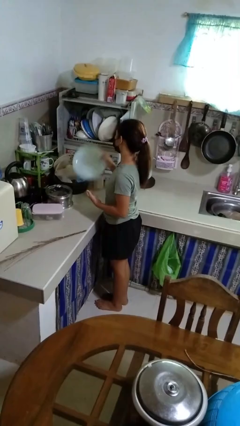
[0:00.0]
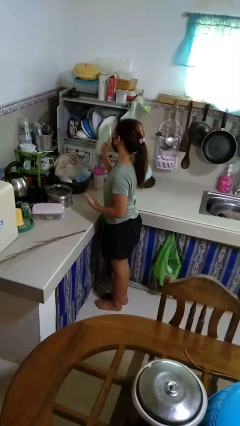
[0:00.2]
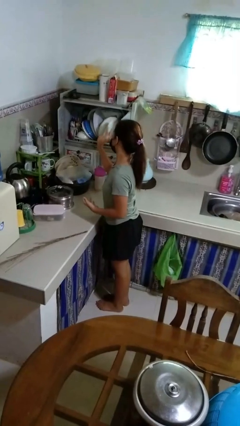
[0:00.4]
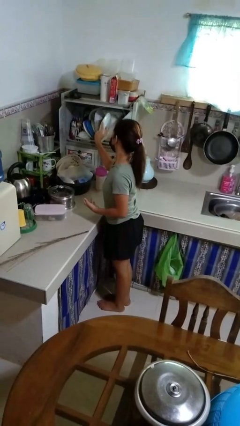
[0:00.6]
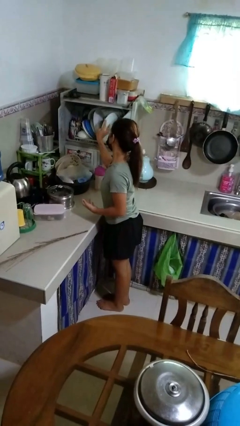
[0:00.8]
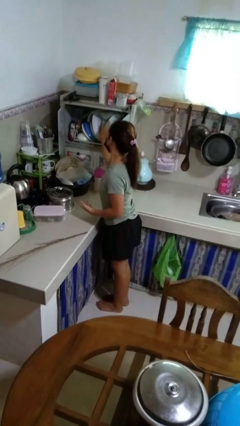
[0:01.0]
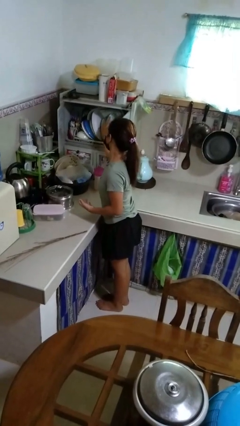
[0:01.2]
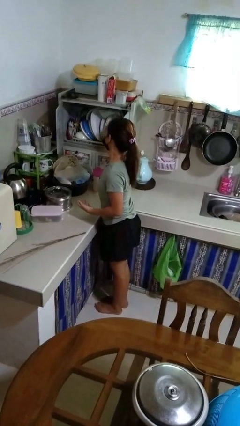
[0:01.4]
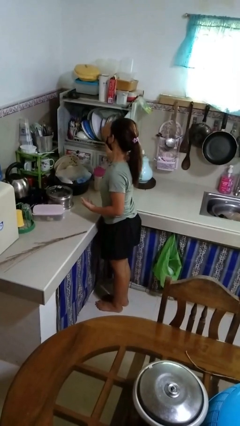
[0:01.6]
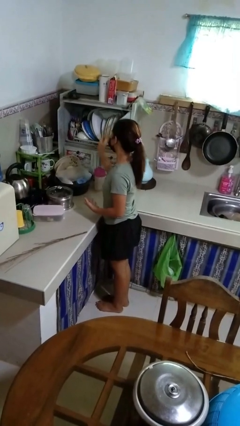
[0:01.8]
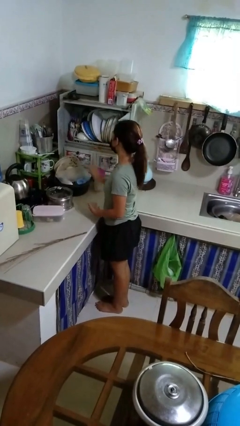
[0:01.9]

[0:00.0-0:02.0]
person puts object into kitchen drawer

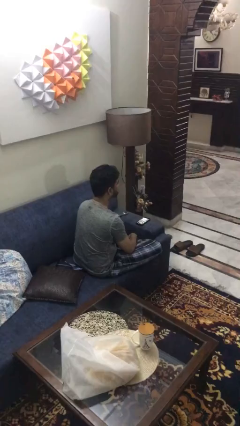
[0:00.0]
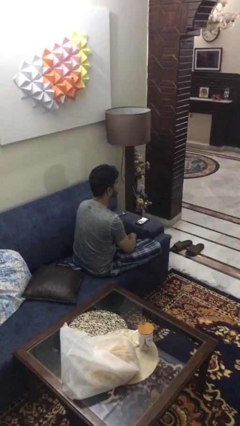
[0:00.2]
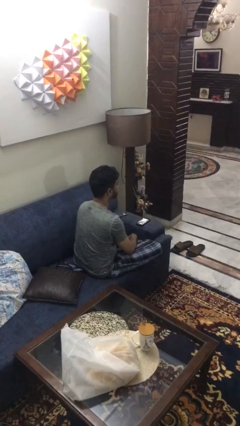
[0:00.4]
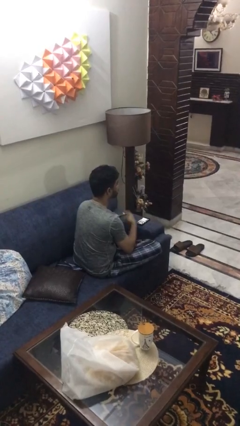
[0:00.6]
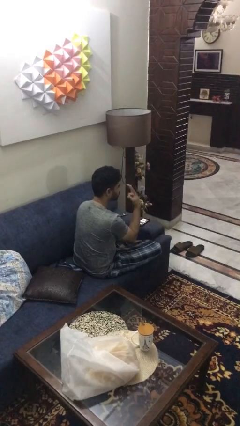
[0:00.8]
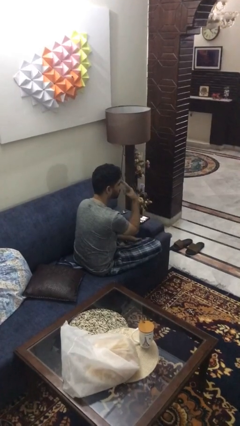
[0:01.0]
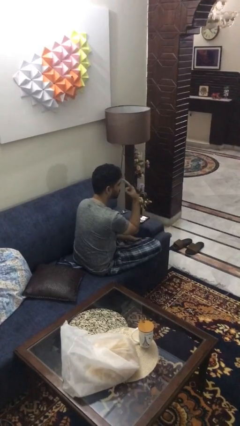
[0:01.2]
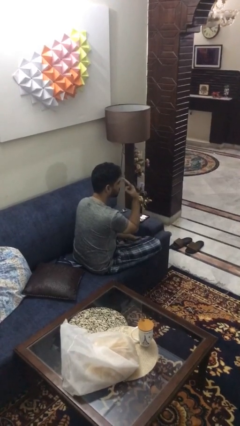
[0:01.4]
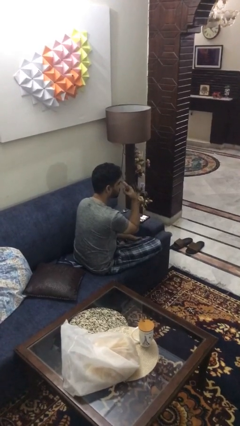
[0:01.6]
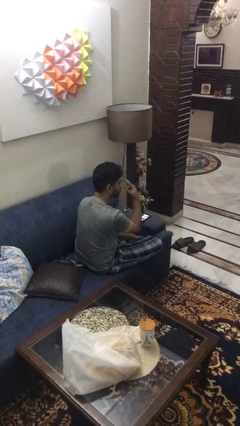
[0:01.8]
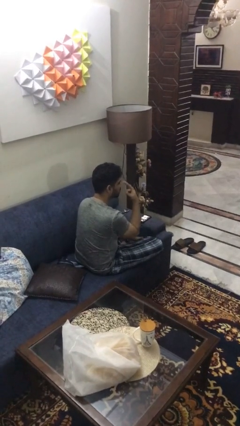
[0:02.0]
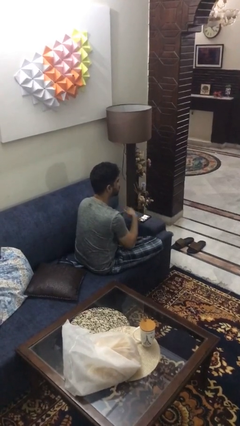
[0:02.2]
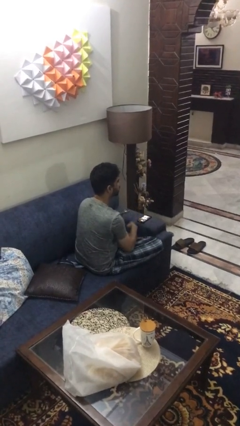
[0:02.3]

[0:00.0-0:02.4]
person gestures watch closely

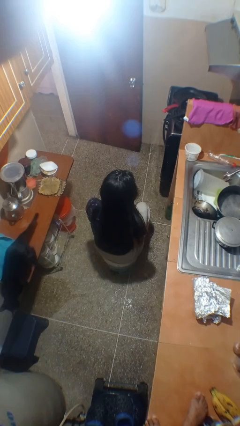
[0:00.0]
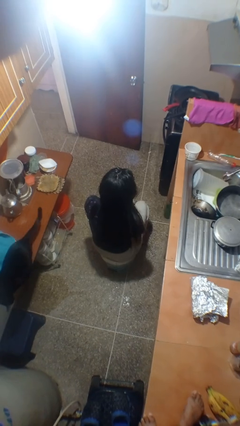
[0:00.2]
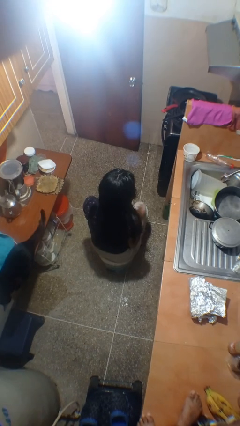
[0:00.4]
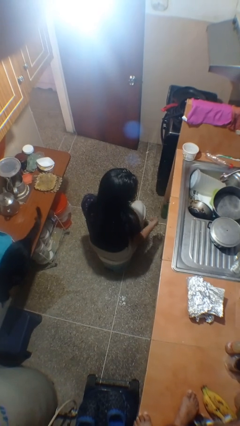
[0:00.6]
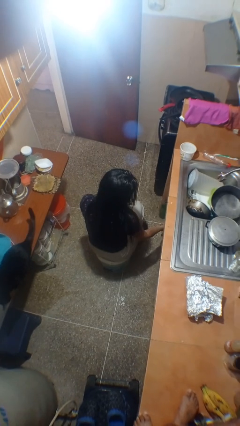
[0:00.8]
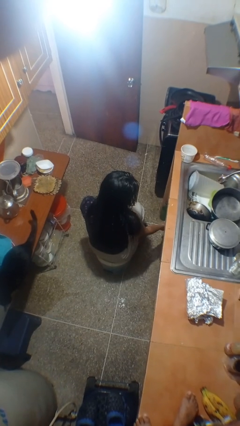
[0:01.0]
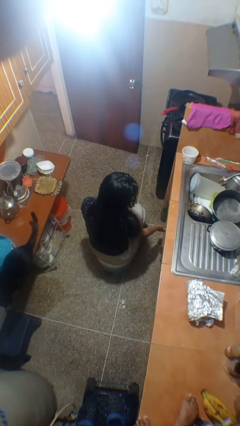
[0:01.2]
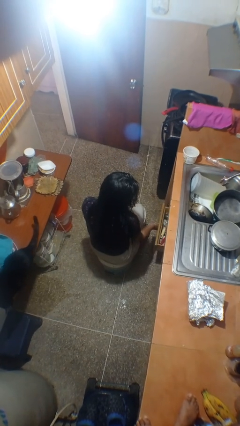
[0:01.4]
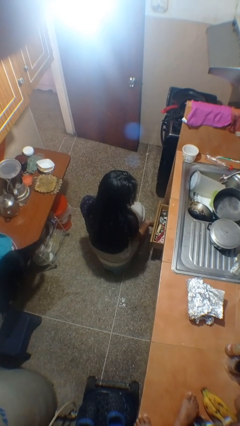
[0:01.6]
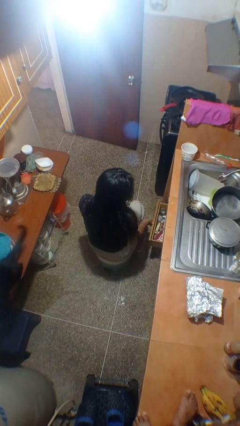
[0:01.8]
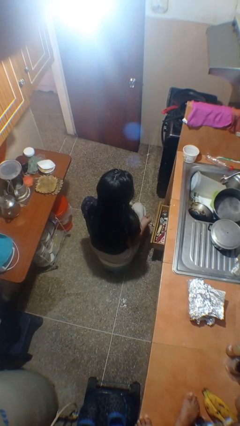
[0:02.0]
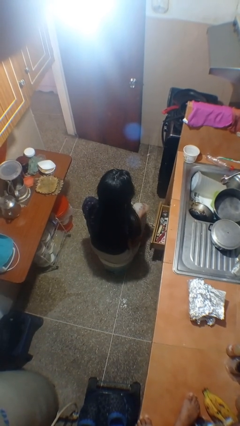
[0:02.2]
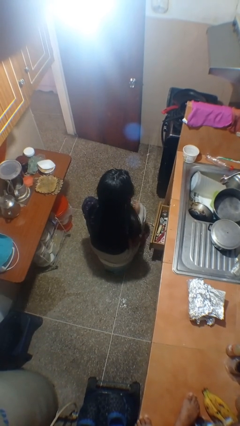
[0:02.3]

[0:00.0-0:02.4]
person opens kitchen drawer

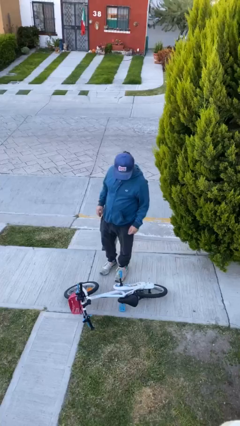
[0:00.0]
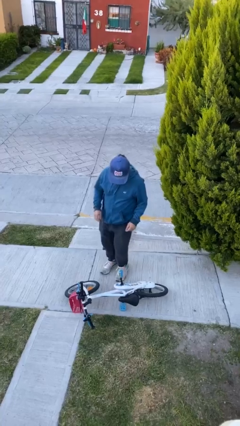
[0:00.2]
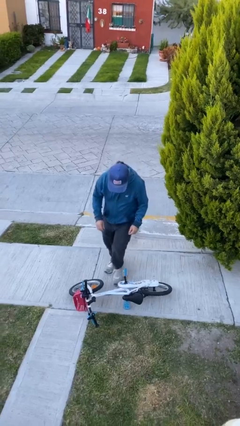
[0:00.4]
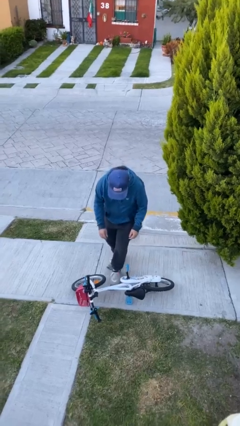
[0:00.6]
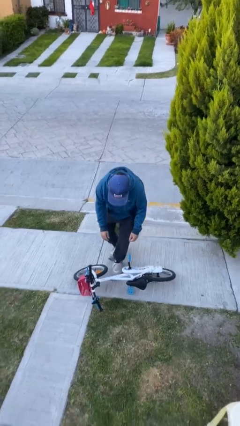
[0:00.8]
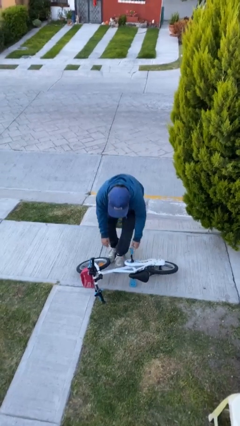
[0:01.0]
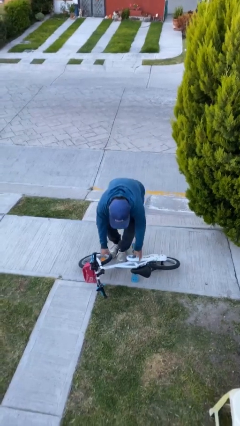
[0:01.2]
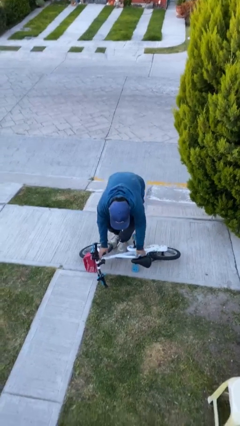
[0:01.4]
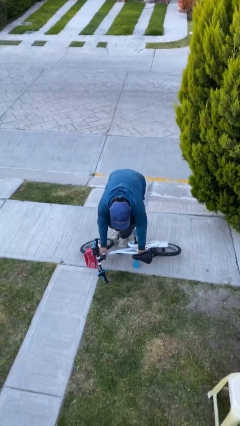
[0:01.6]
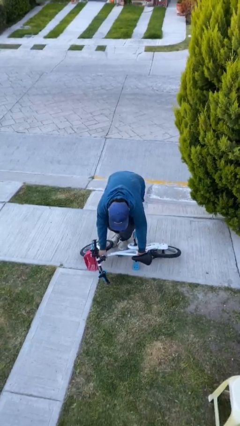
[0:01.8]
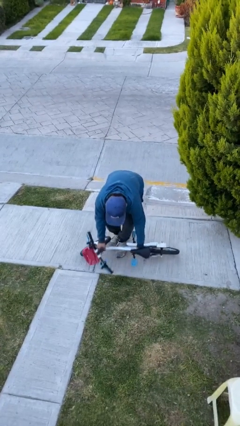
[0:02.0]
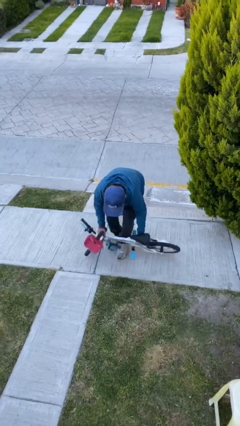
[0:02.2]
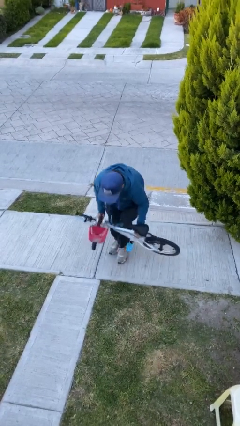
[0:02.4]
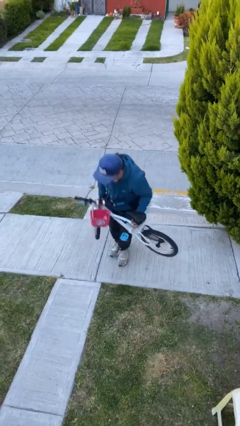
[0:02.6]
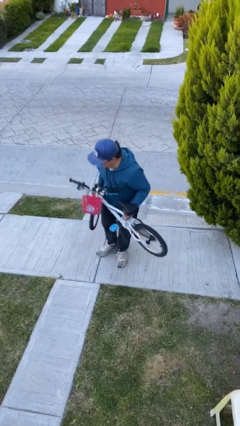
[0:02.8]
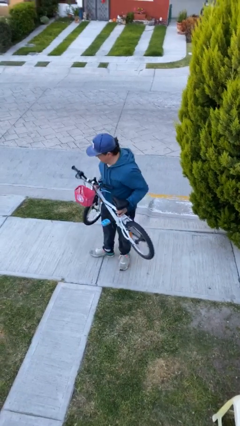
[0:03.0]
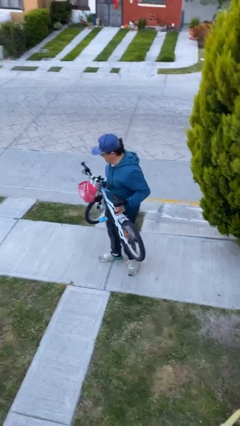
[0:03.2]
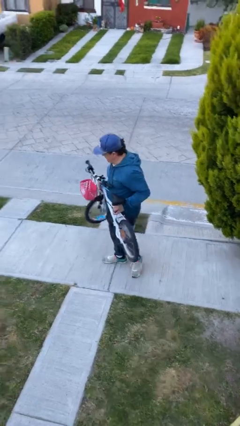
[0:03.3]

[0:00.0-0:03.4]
person picks up object from floor

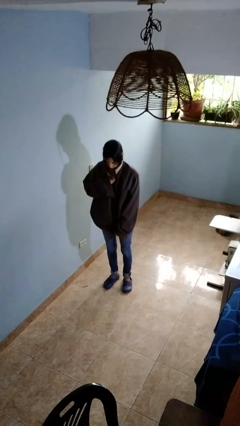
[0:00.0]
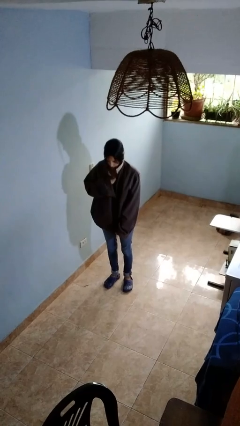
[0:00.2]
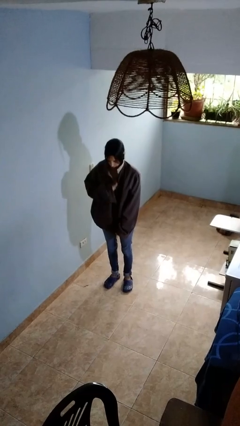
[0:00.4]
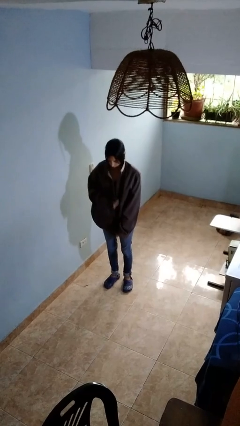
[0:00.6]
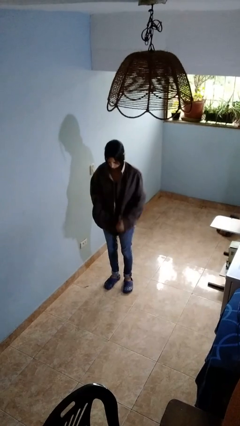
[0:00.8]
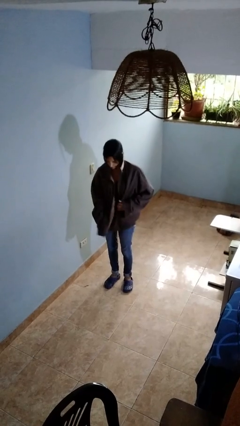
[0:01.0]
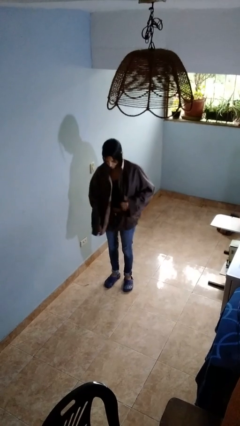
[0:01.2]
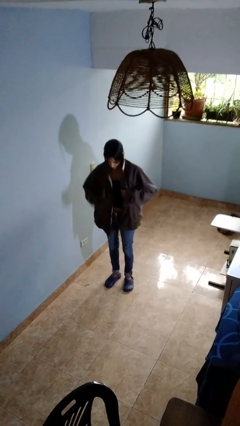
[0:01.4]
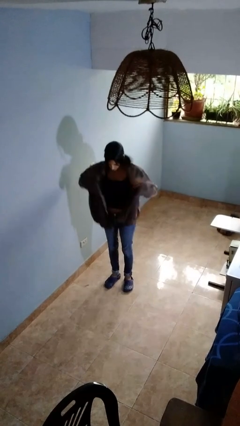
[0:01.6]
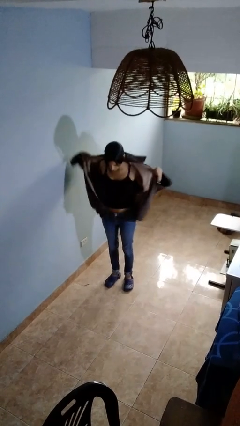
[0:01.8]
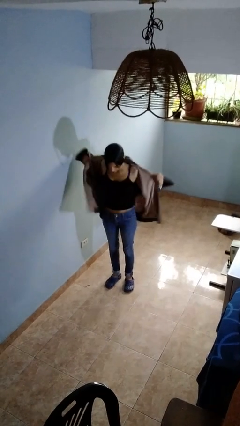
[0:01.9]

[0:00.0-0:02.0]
person unzips jacket

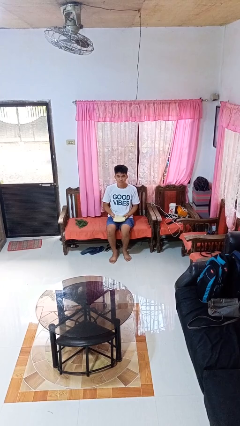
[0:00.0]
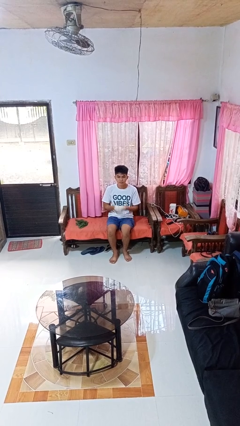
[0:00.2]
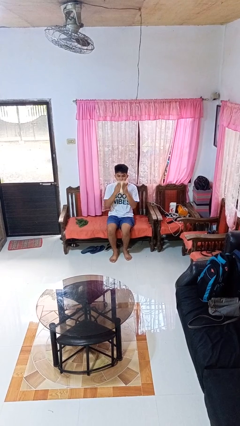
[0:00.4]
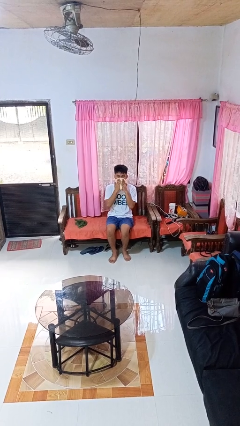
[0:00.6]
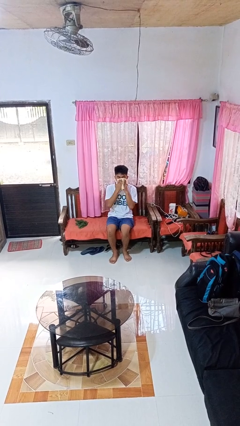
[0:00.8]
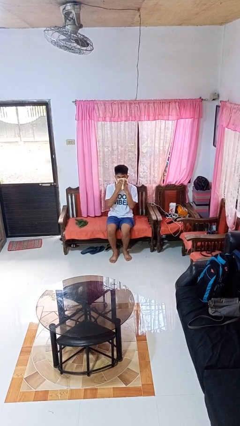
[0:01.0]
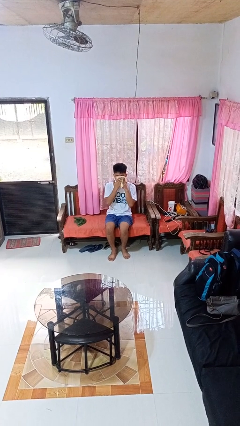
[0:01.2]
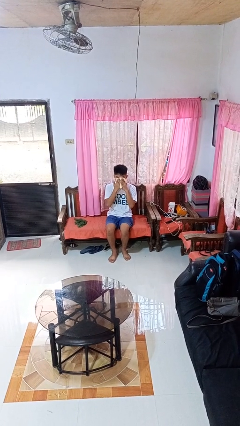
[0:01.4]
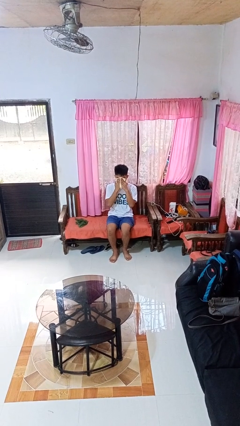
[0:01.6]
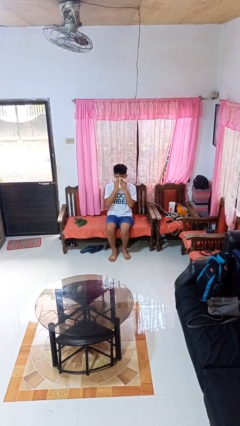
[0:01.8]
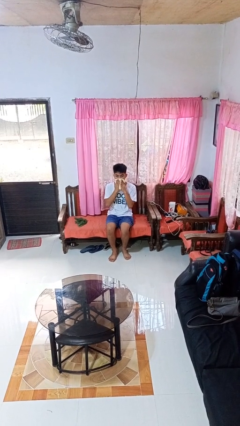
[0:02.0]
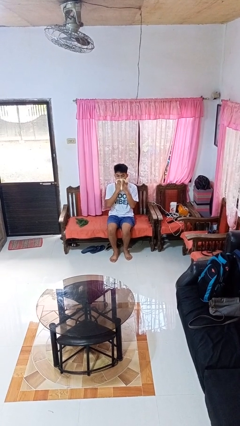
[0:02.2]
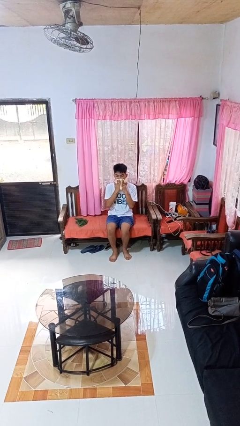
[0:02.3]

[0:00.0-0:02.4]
person wipes mouth with napkin

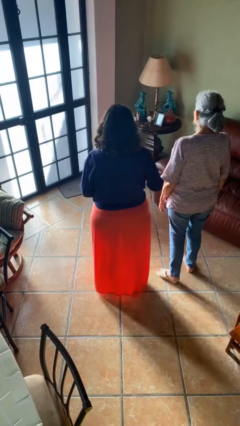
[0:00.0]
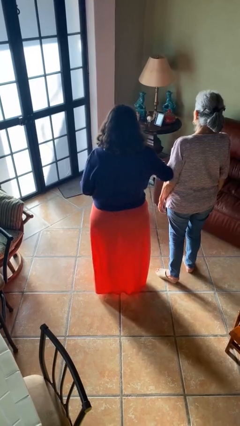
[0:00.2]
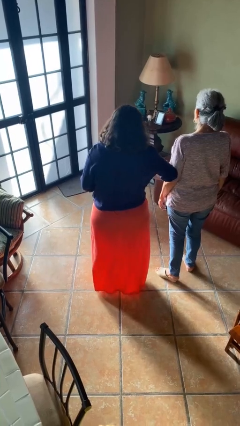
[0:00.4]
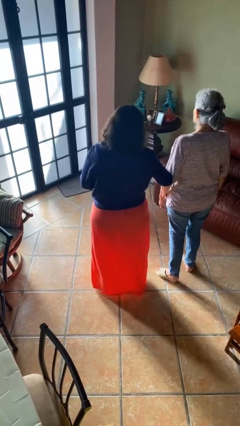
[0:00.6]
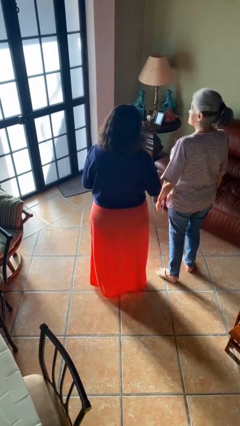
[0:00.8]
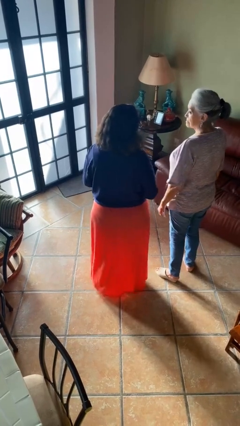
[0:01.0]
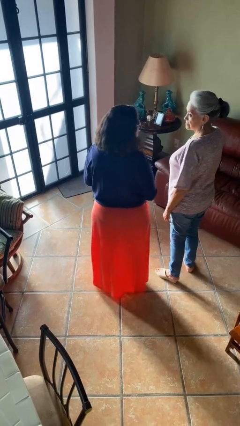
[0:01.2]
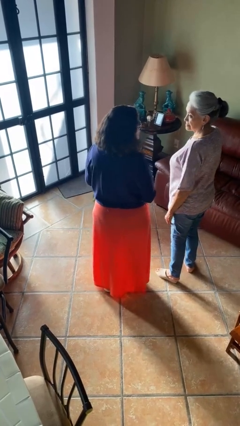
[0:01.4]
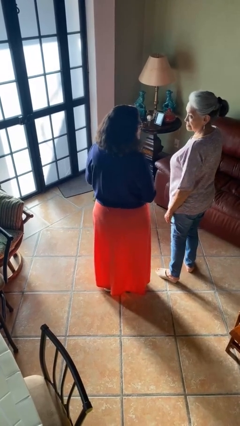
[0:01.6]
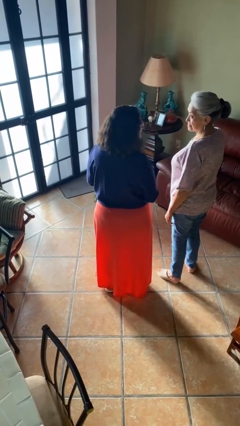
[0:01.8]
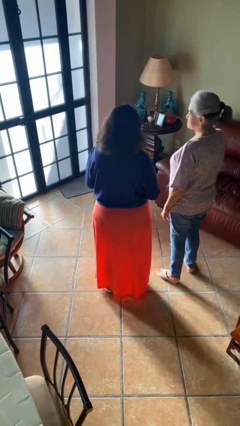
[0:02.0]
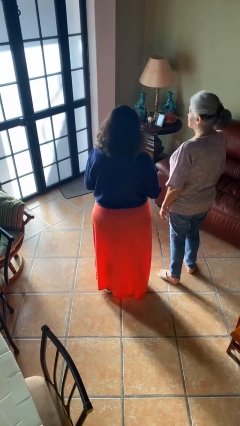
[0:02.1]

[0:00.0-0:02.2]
person nudges person with elbow
